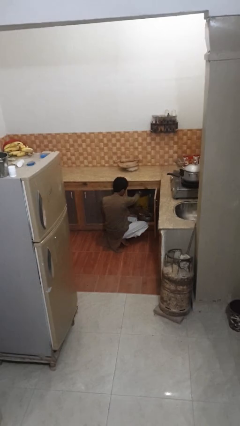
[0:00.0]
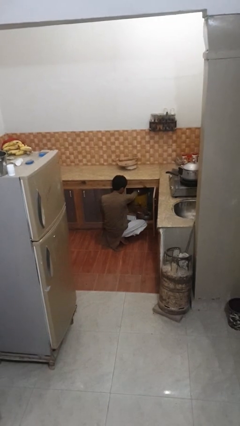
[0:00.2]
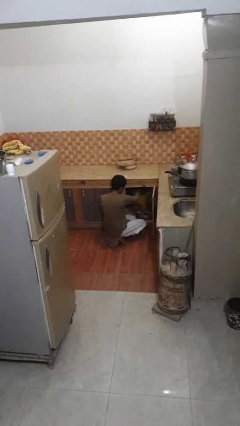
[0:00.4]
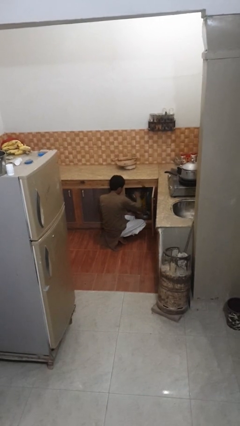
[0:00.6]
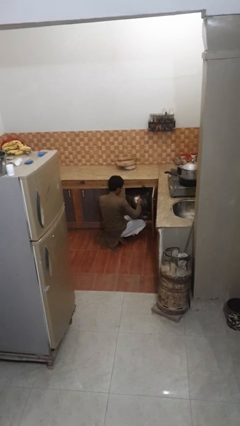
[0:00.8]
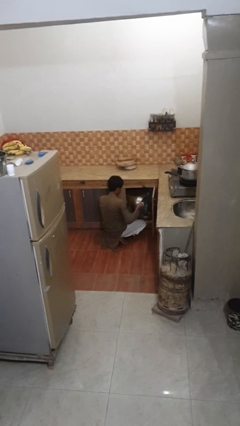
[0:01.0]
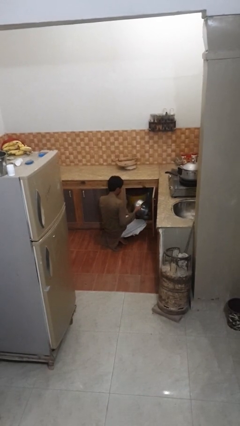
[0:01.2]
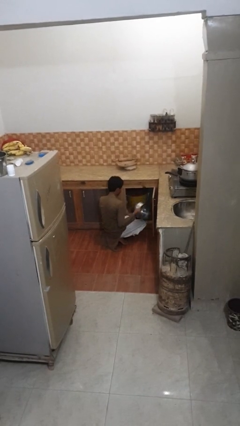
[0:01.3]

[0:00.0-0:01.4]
person takes object from kitchen drawer

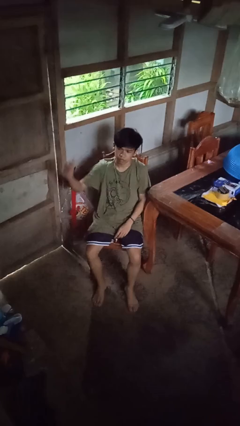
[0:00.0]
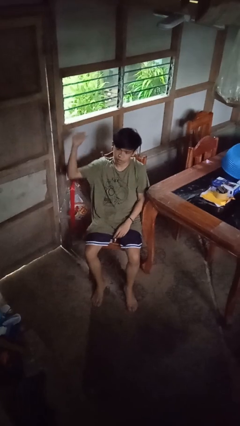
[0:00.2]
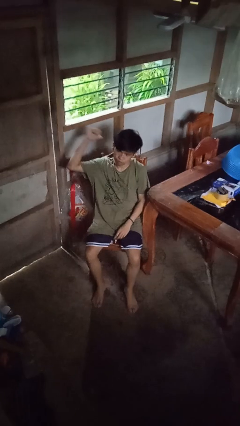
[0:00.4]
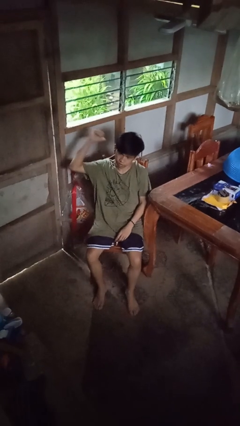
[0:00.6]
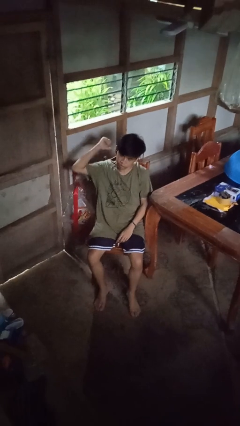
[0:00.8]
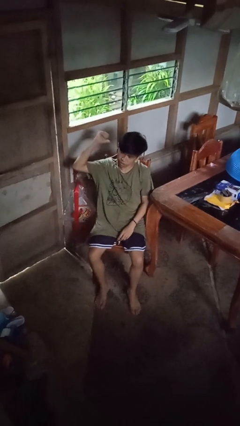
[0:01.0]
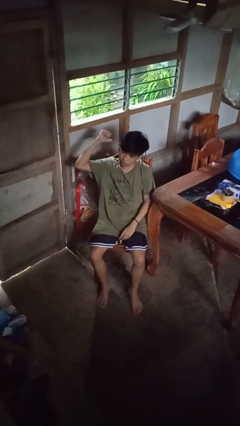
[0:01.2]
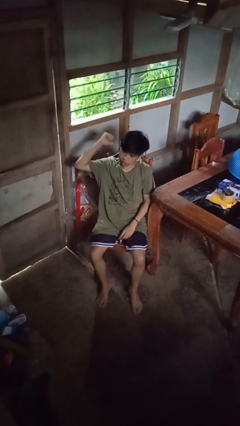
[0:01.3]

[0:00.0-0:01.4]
person gestures behind me

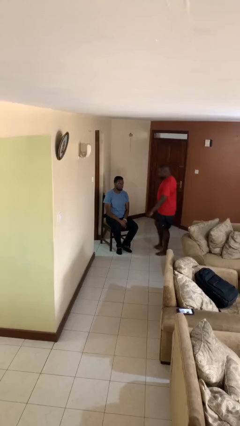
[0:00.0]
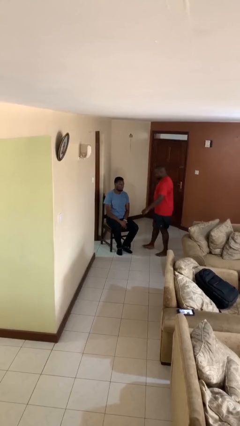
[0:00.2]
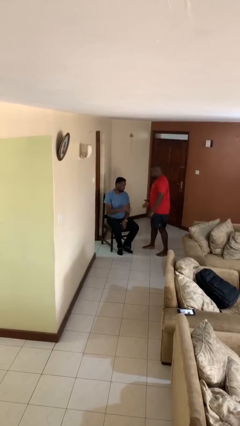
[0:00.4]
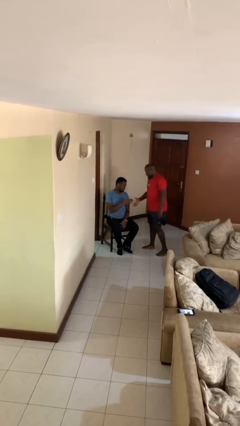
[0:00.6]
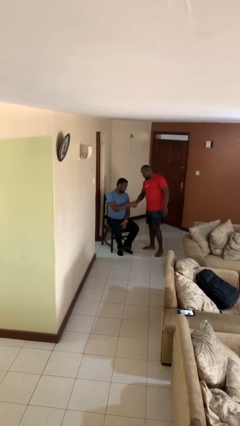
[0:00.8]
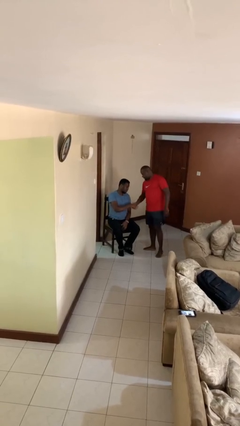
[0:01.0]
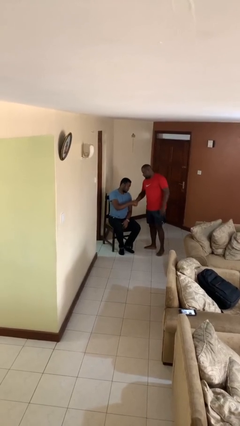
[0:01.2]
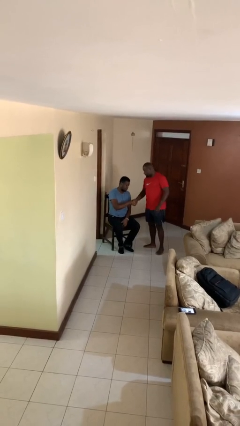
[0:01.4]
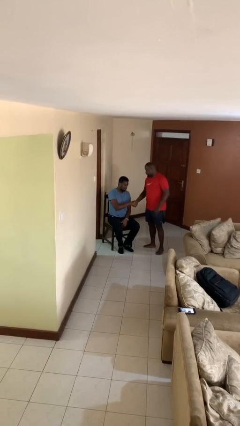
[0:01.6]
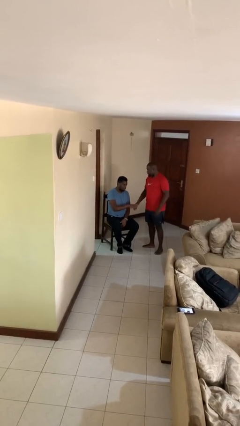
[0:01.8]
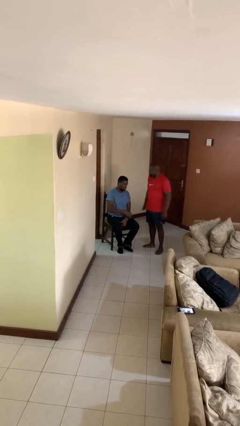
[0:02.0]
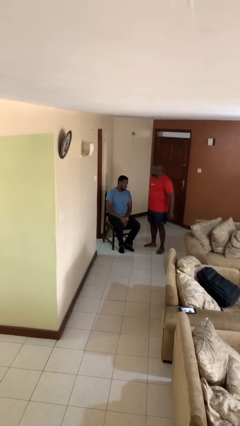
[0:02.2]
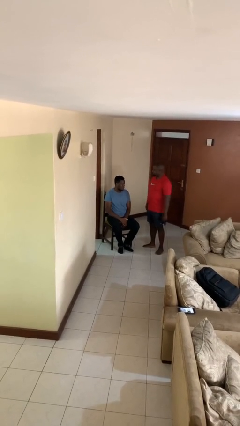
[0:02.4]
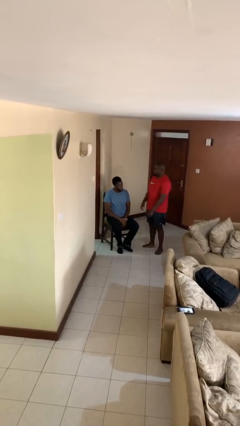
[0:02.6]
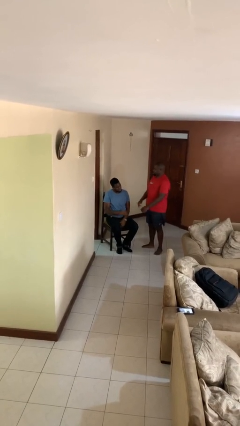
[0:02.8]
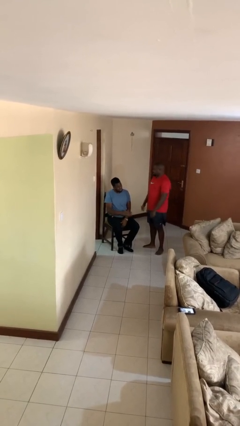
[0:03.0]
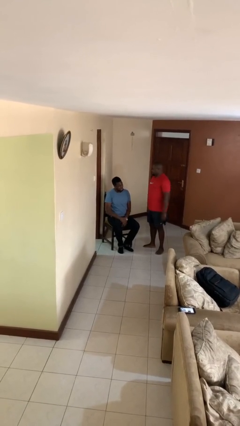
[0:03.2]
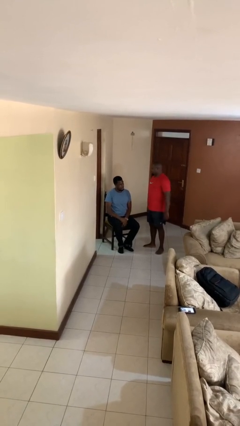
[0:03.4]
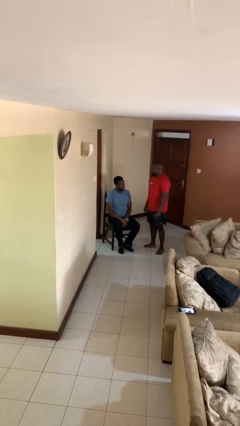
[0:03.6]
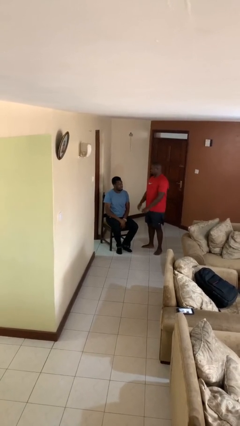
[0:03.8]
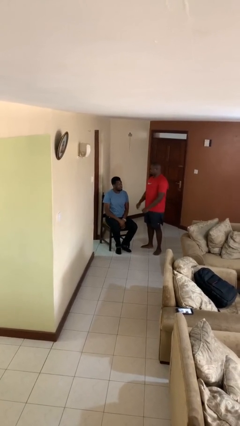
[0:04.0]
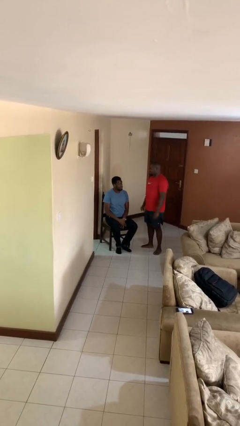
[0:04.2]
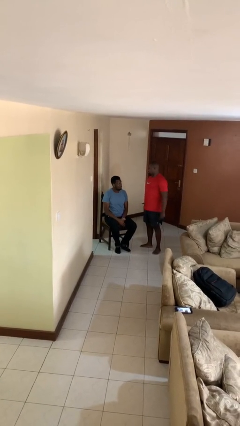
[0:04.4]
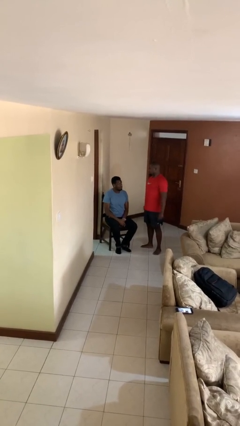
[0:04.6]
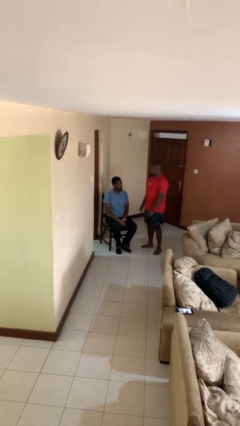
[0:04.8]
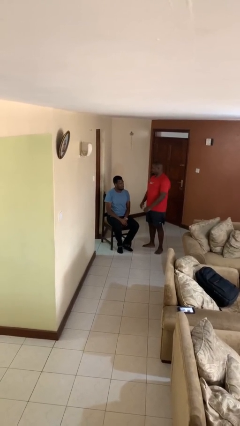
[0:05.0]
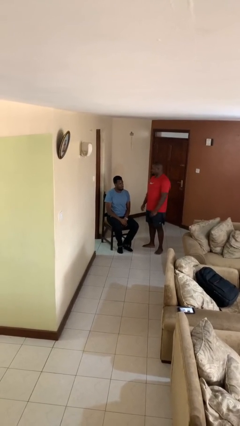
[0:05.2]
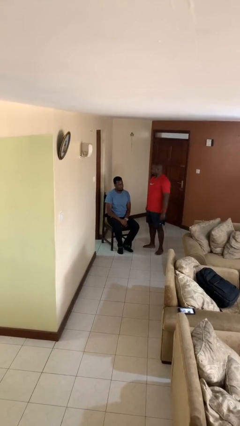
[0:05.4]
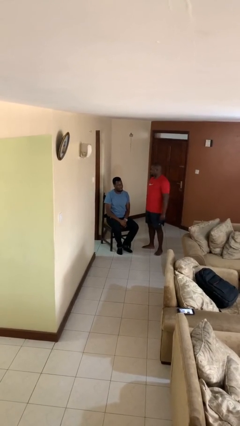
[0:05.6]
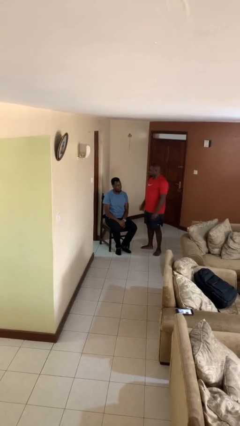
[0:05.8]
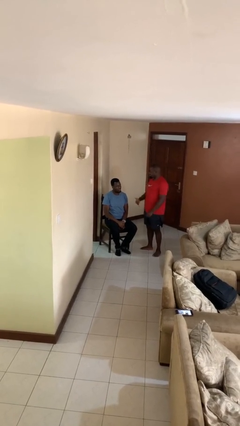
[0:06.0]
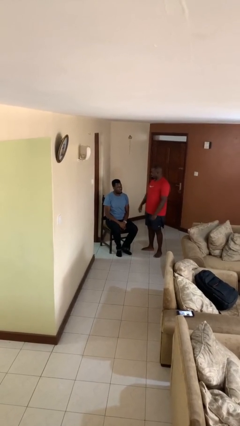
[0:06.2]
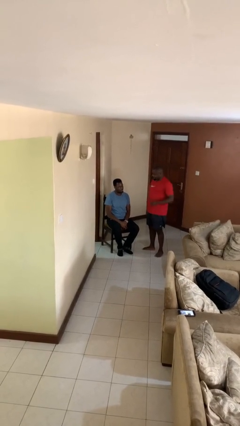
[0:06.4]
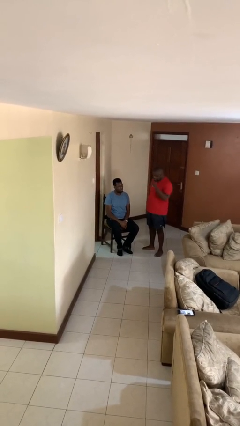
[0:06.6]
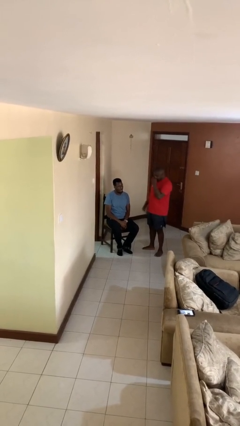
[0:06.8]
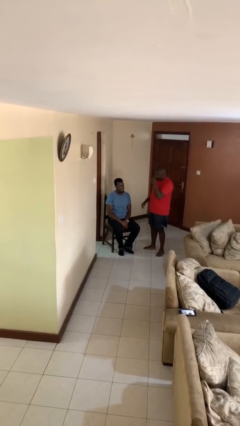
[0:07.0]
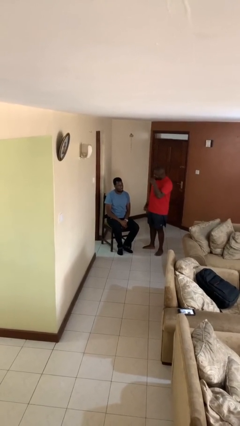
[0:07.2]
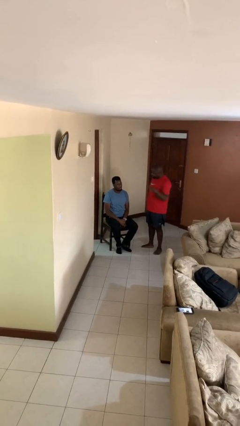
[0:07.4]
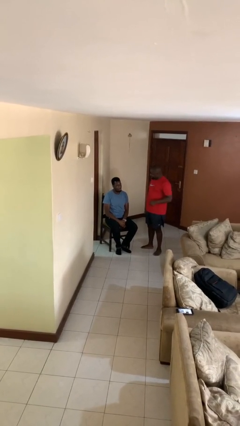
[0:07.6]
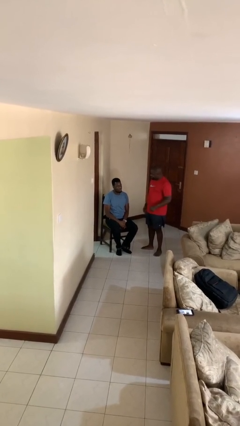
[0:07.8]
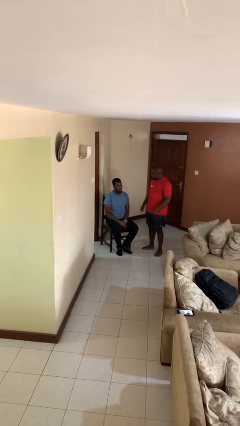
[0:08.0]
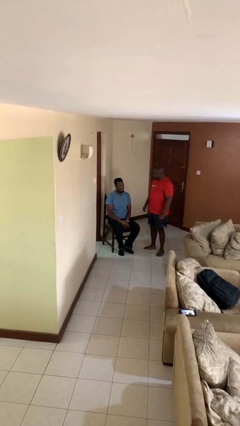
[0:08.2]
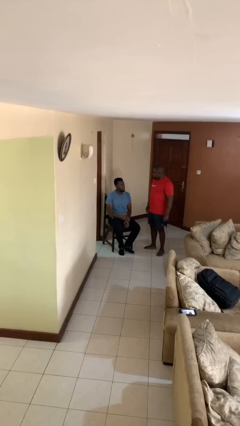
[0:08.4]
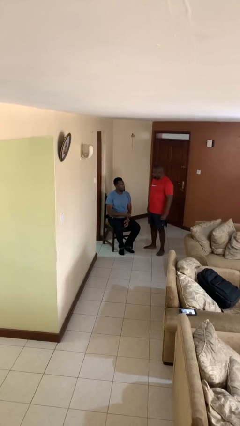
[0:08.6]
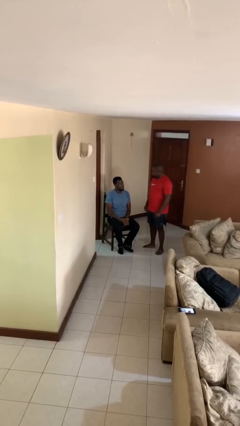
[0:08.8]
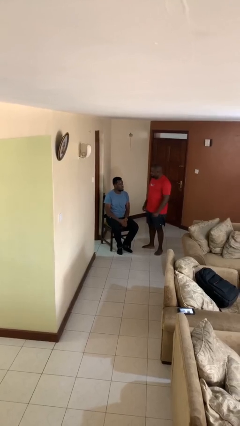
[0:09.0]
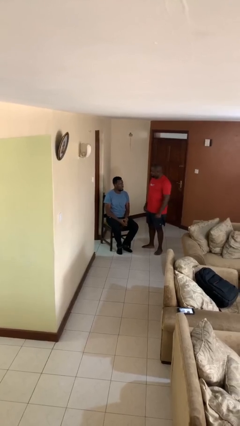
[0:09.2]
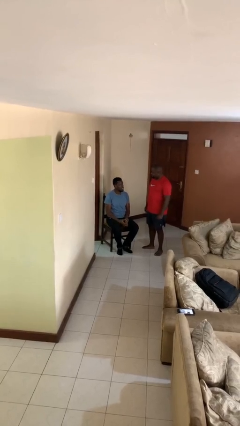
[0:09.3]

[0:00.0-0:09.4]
person shakes hand

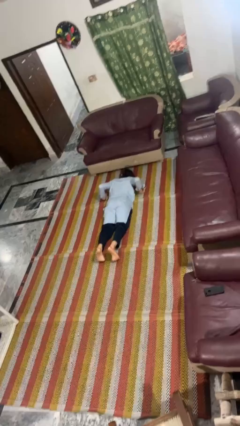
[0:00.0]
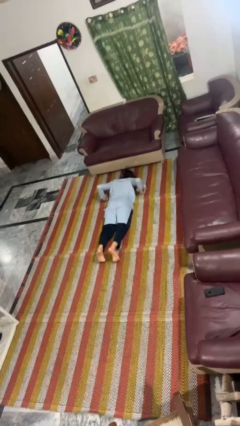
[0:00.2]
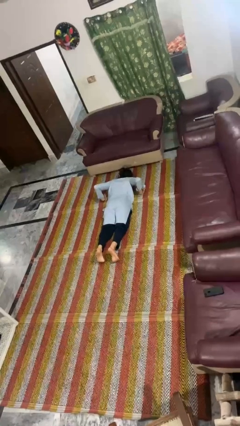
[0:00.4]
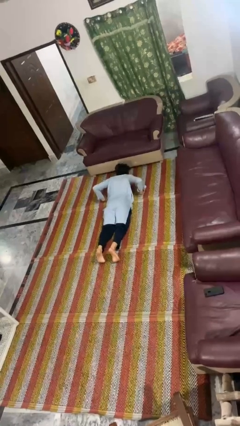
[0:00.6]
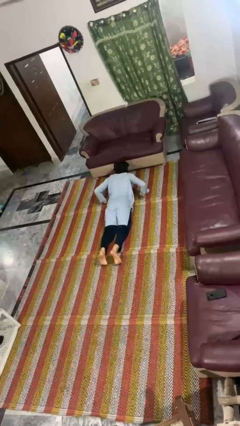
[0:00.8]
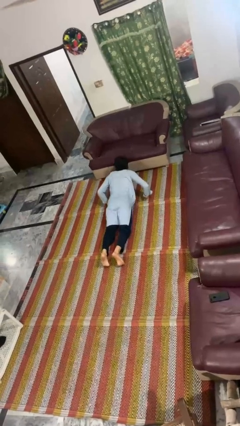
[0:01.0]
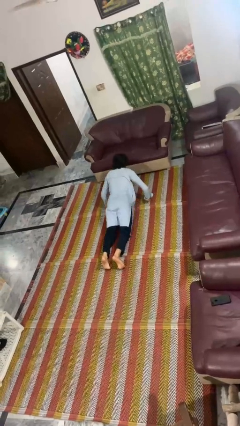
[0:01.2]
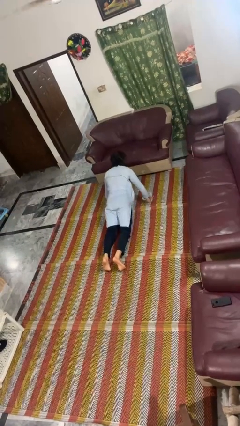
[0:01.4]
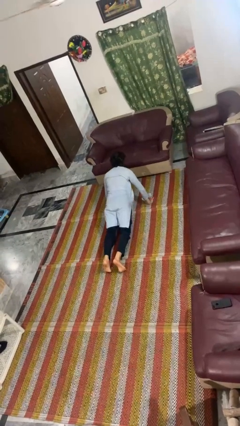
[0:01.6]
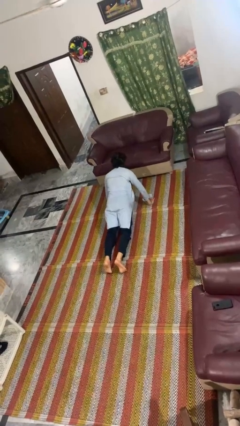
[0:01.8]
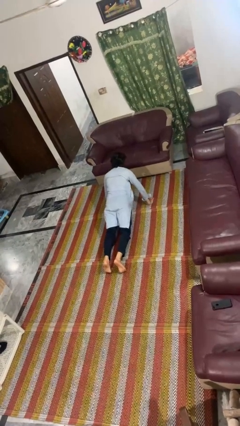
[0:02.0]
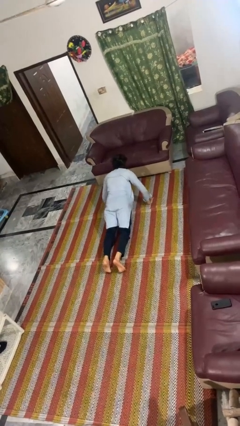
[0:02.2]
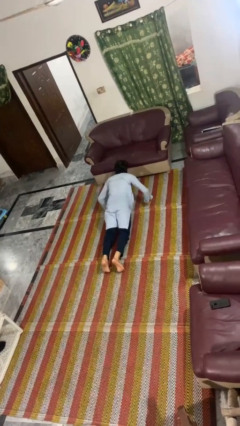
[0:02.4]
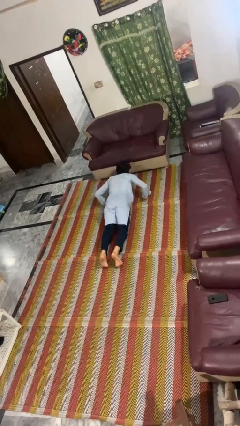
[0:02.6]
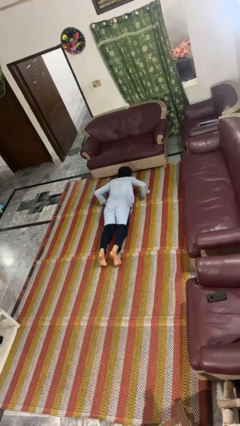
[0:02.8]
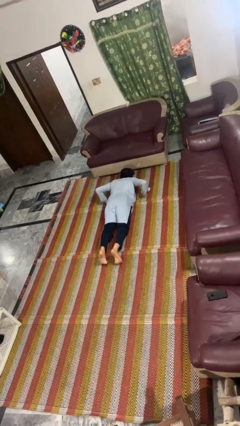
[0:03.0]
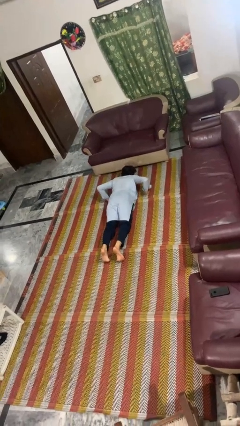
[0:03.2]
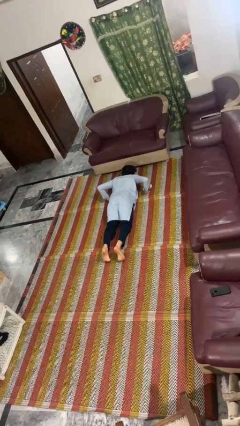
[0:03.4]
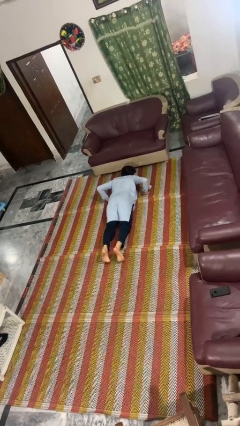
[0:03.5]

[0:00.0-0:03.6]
person exercises with pushup

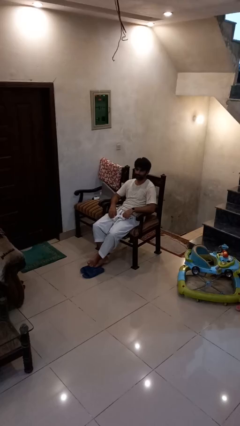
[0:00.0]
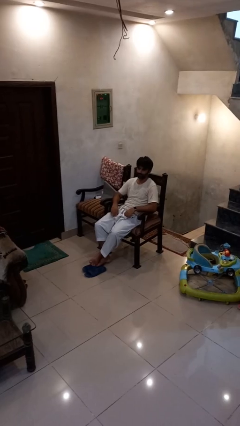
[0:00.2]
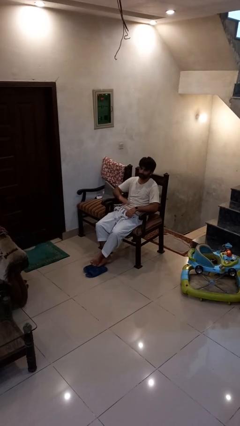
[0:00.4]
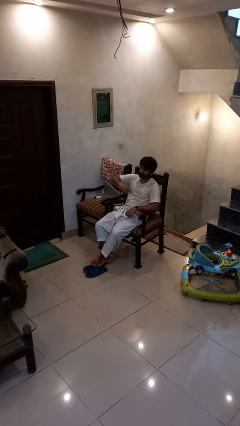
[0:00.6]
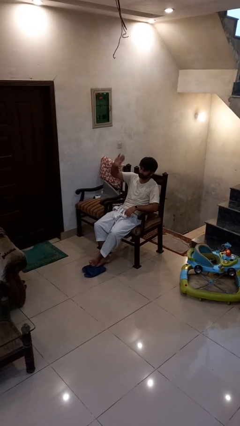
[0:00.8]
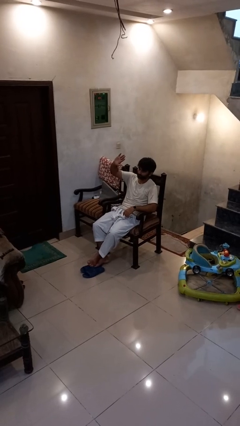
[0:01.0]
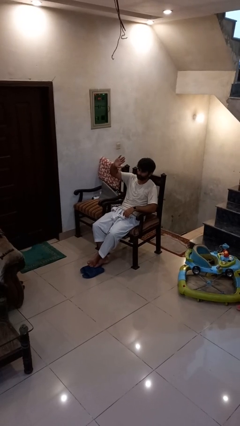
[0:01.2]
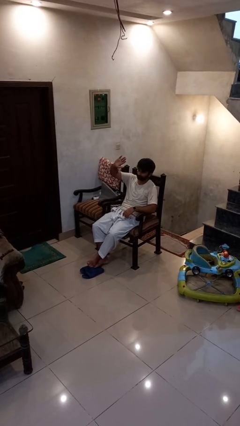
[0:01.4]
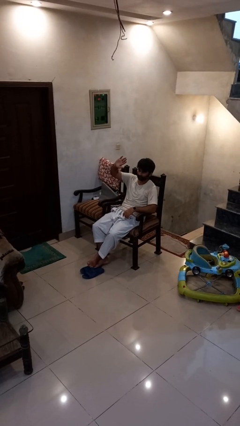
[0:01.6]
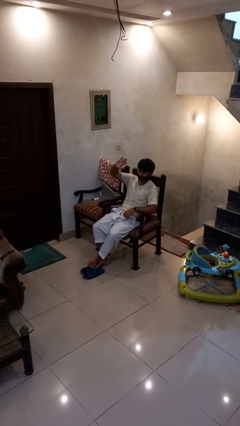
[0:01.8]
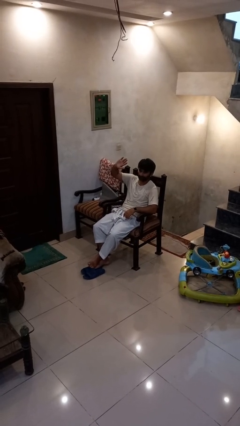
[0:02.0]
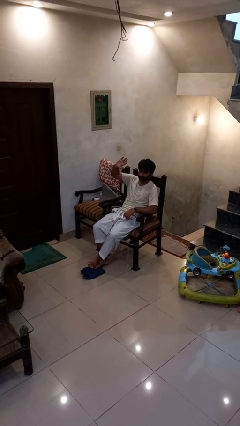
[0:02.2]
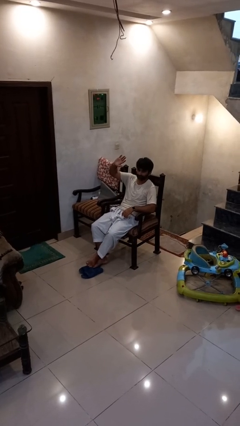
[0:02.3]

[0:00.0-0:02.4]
person gestures swipe up
